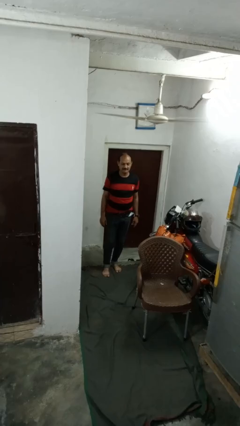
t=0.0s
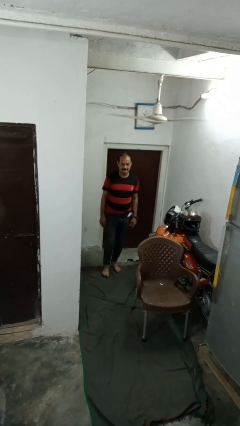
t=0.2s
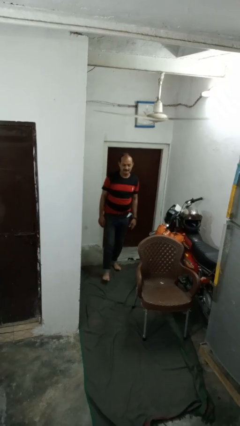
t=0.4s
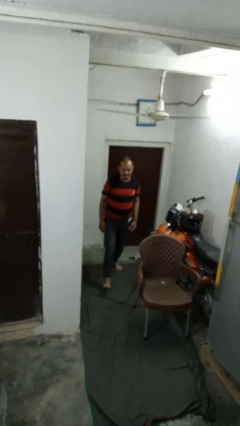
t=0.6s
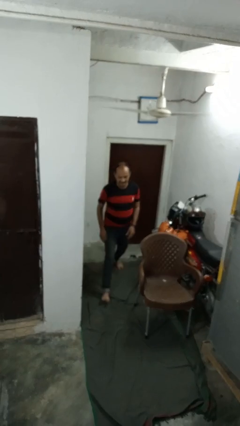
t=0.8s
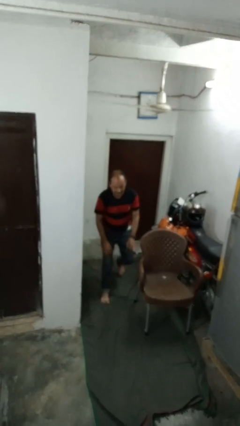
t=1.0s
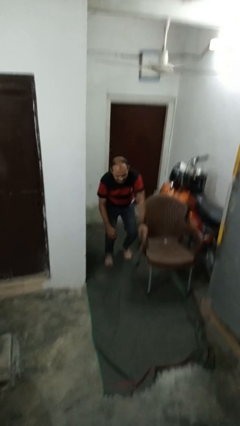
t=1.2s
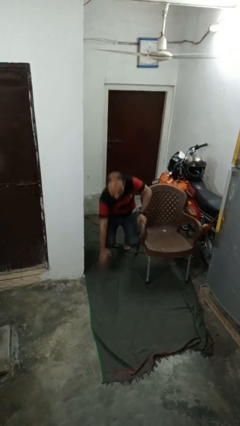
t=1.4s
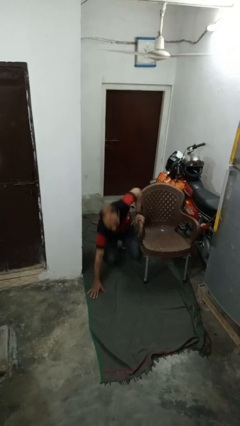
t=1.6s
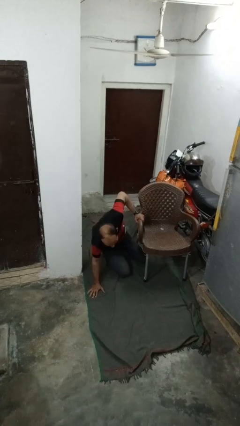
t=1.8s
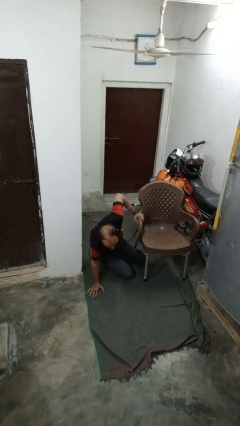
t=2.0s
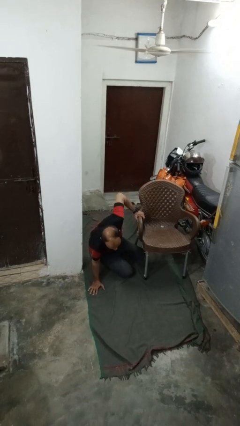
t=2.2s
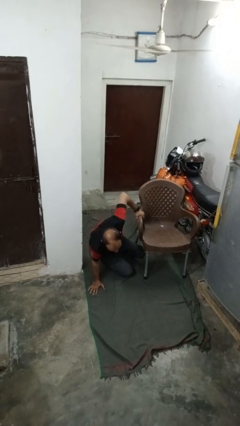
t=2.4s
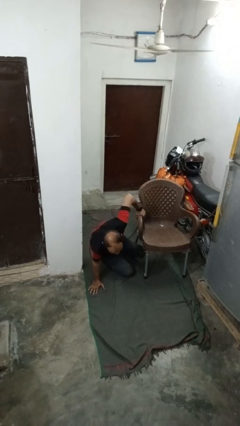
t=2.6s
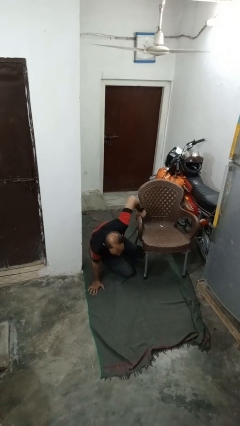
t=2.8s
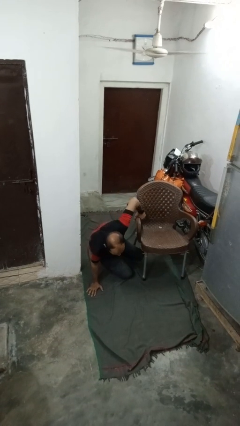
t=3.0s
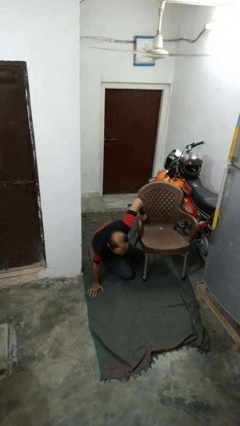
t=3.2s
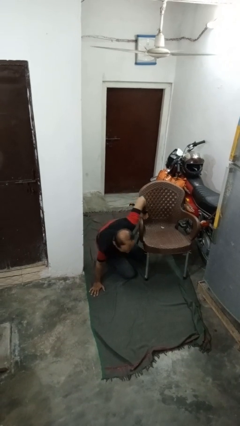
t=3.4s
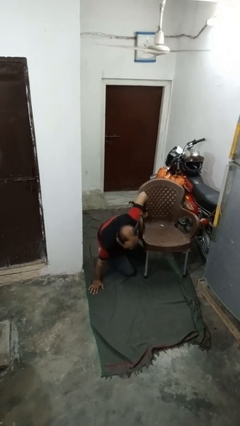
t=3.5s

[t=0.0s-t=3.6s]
person trips on object on floor

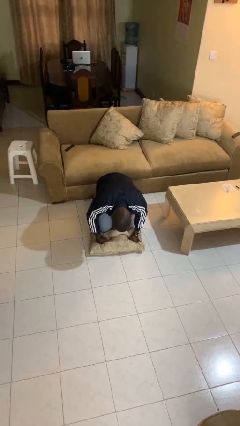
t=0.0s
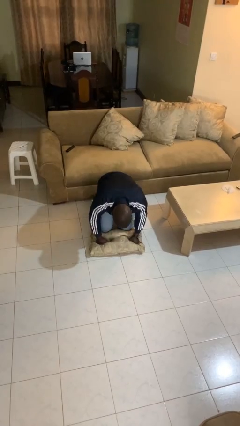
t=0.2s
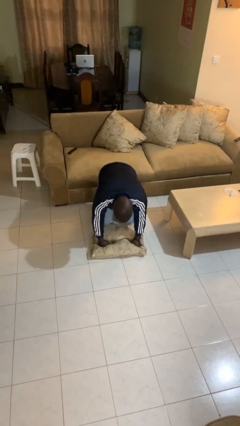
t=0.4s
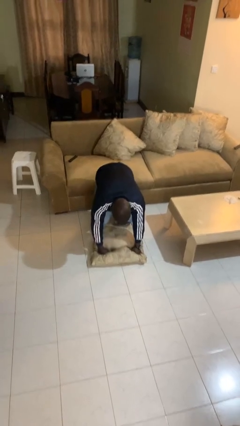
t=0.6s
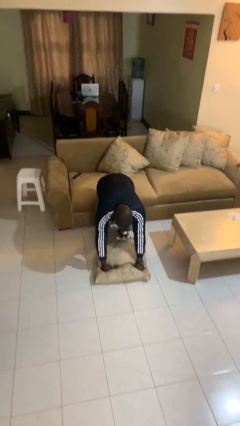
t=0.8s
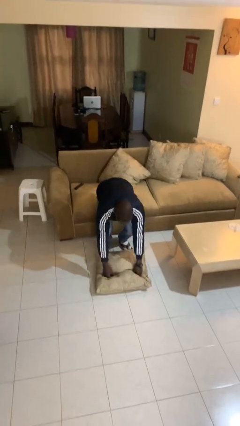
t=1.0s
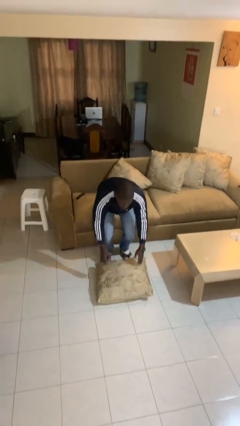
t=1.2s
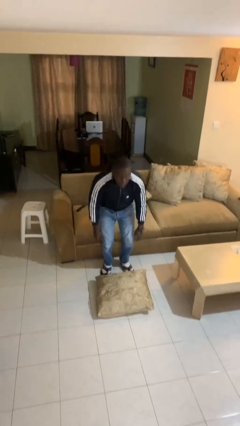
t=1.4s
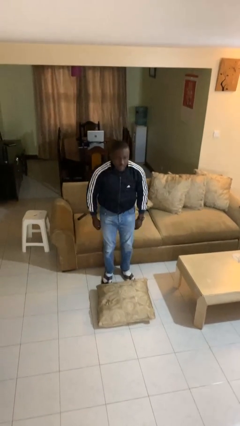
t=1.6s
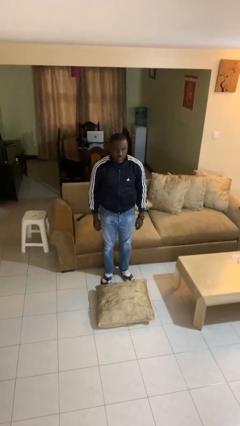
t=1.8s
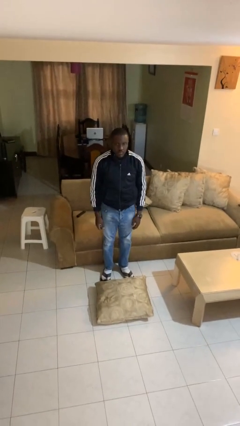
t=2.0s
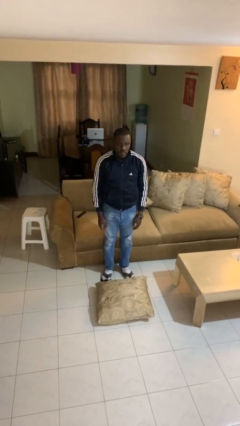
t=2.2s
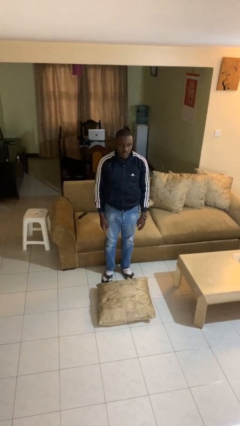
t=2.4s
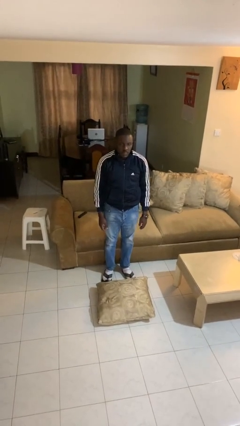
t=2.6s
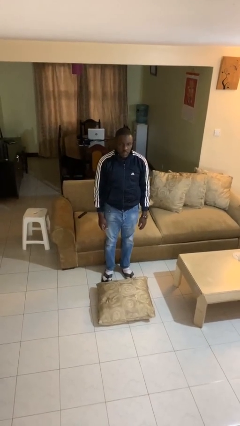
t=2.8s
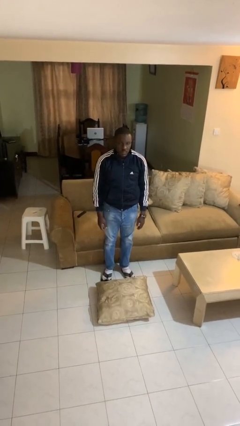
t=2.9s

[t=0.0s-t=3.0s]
person stands up from floor

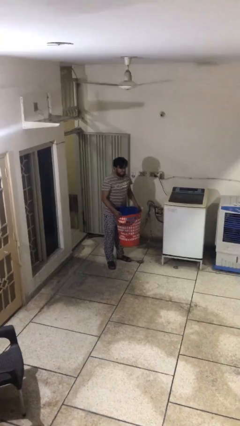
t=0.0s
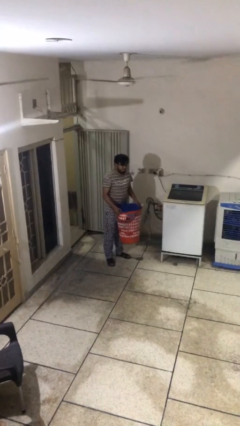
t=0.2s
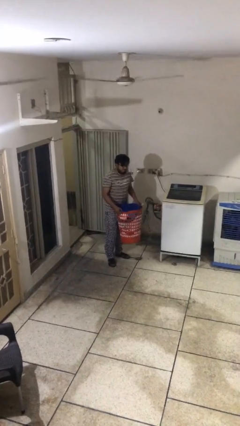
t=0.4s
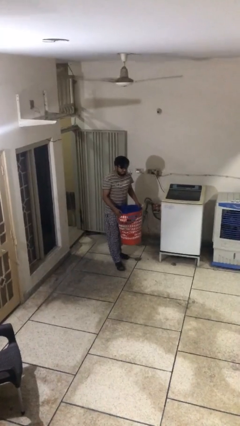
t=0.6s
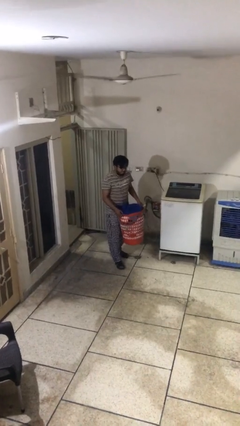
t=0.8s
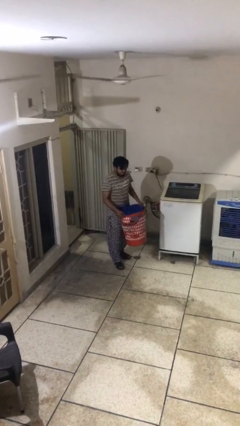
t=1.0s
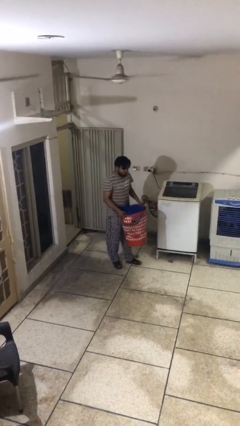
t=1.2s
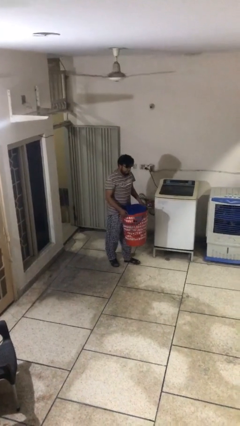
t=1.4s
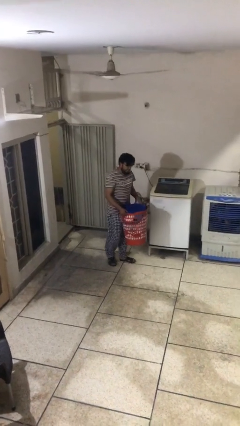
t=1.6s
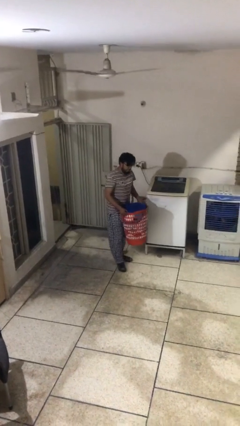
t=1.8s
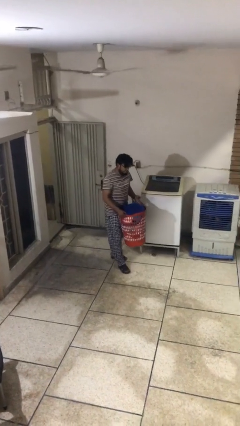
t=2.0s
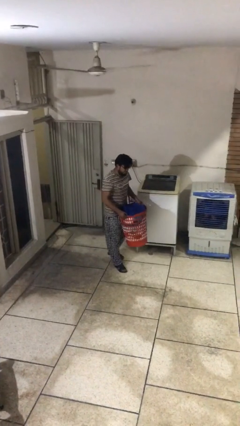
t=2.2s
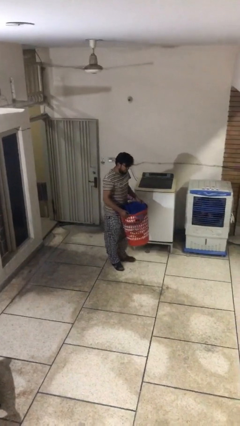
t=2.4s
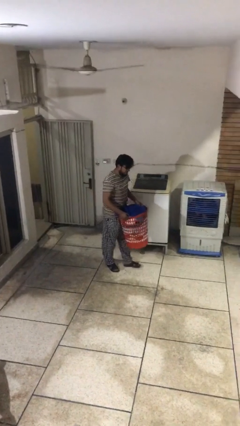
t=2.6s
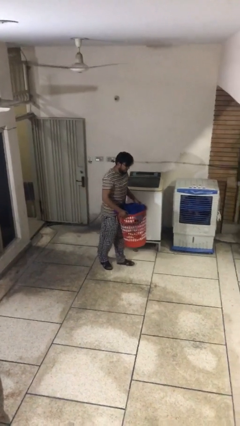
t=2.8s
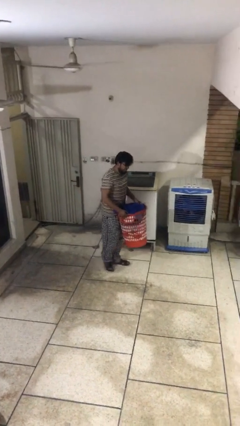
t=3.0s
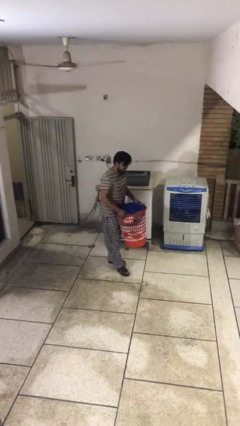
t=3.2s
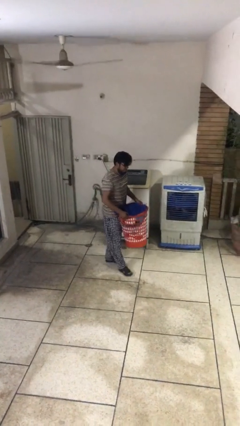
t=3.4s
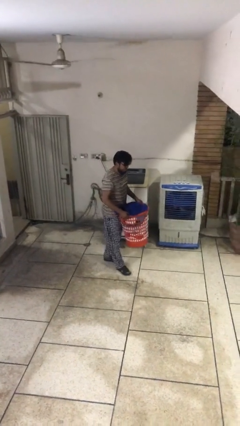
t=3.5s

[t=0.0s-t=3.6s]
person carries heavy object

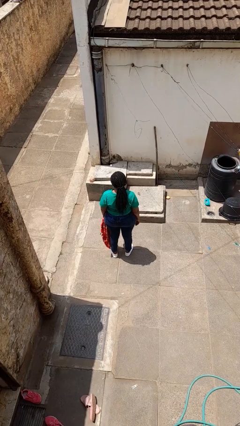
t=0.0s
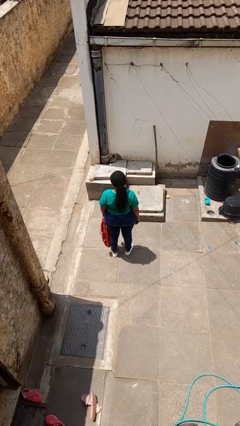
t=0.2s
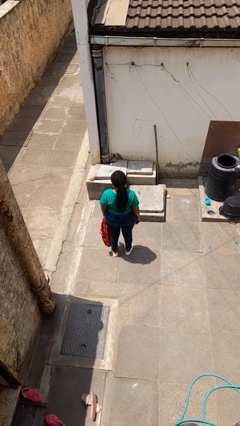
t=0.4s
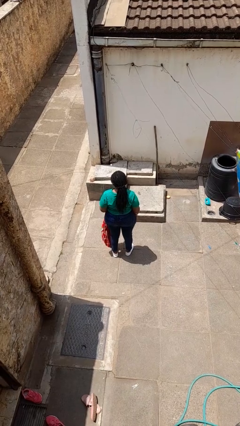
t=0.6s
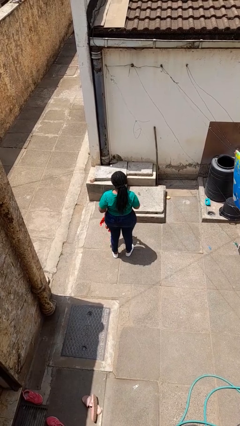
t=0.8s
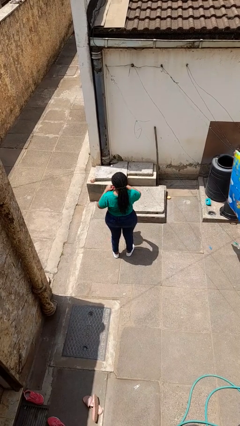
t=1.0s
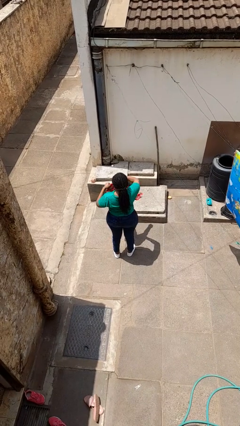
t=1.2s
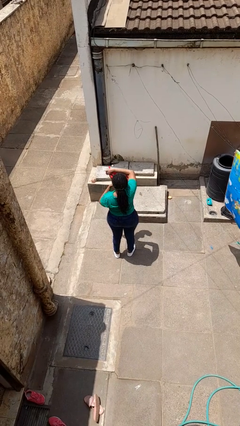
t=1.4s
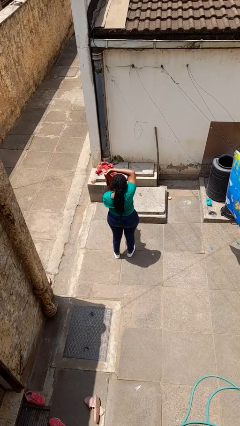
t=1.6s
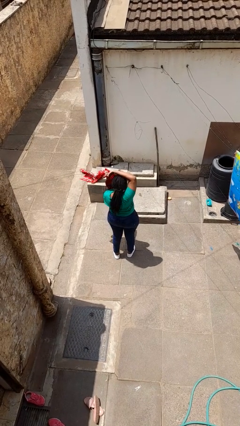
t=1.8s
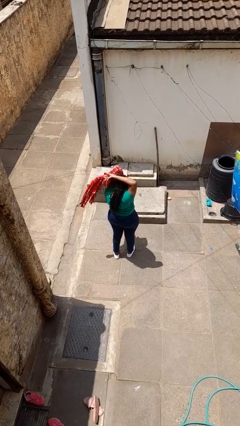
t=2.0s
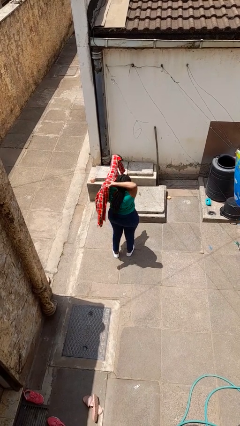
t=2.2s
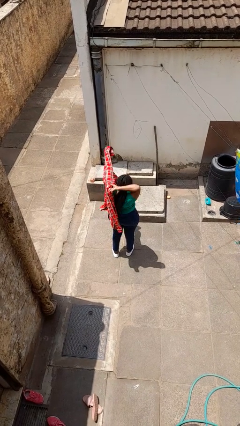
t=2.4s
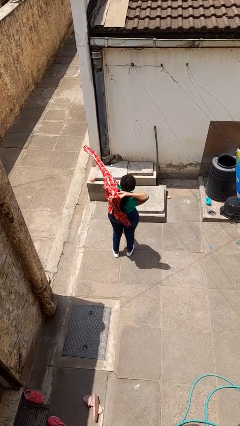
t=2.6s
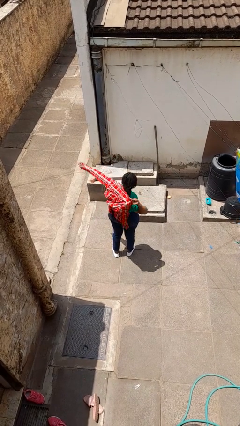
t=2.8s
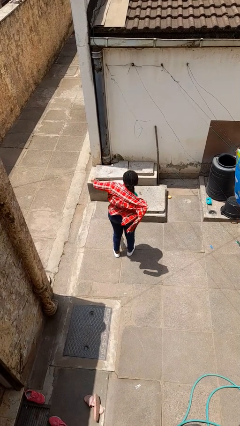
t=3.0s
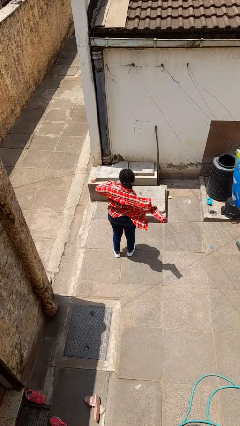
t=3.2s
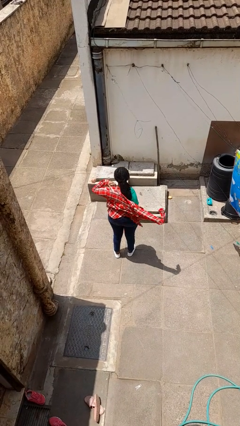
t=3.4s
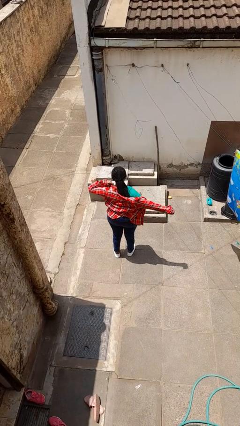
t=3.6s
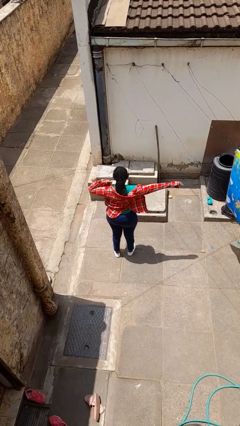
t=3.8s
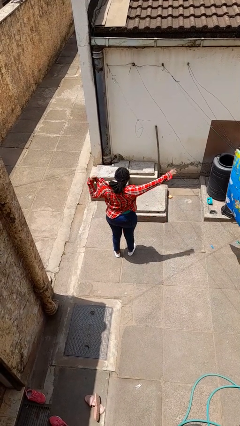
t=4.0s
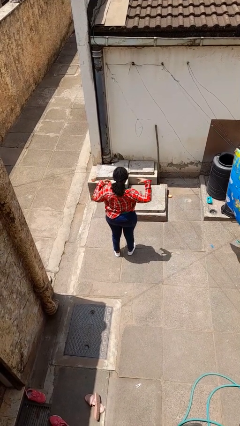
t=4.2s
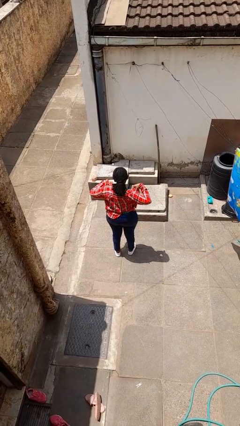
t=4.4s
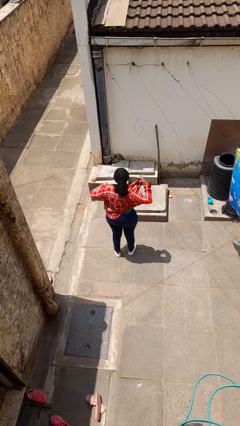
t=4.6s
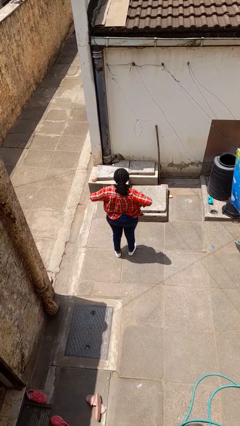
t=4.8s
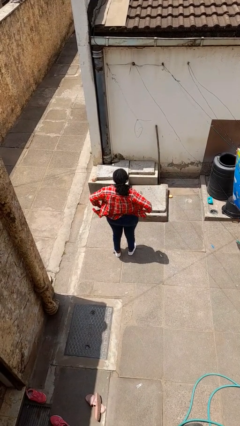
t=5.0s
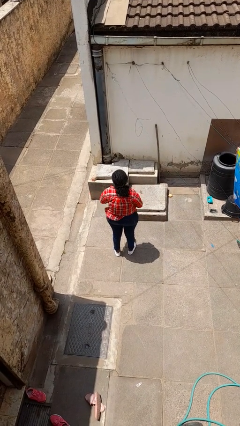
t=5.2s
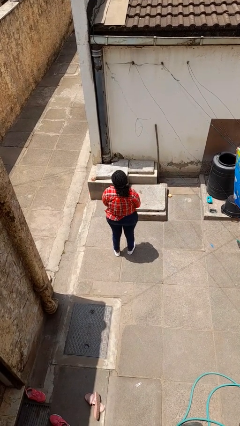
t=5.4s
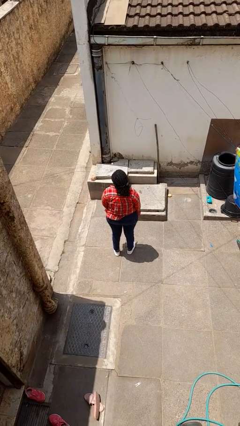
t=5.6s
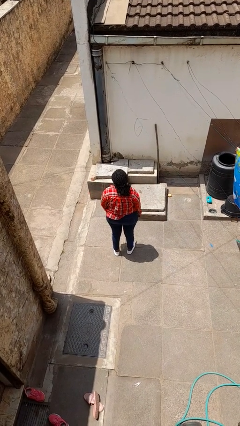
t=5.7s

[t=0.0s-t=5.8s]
person puts on shirt

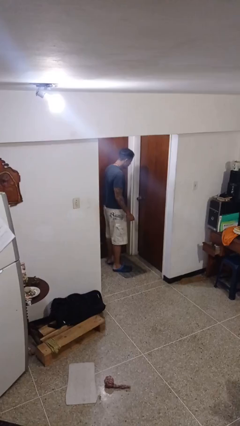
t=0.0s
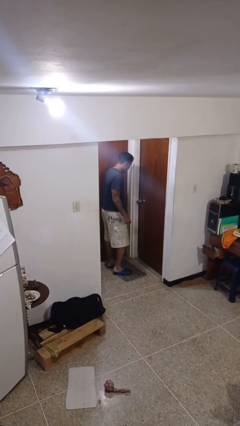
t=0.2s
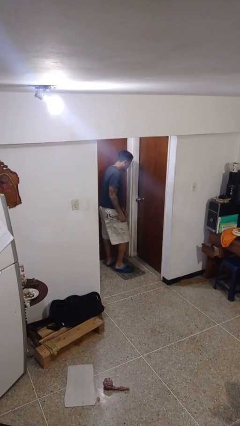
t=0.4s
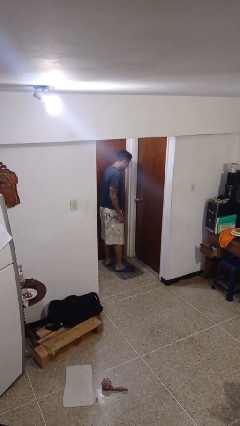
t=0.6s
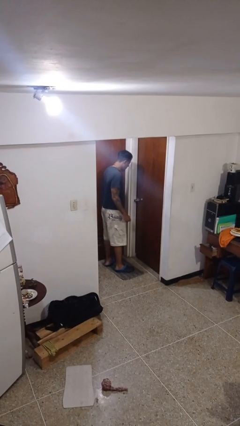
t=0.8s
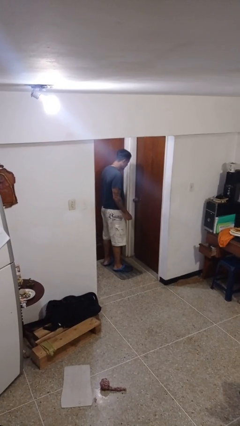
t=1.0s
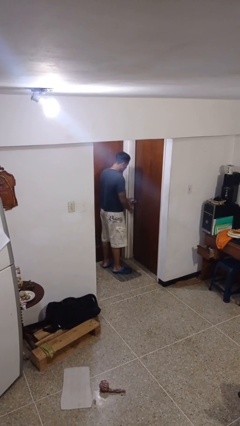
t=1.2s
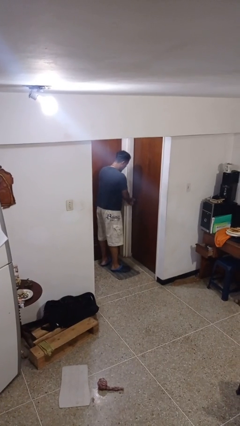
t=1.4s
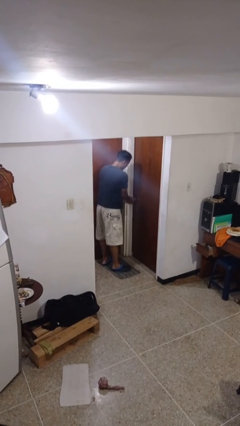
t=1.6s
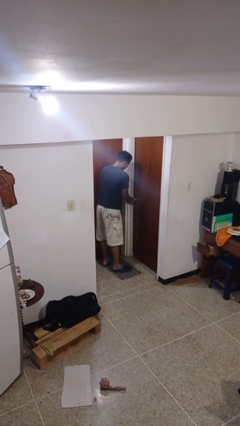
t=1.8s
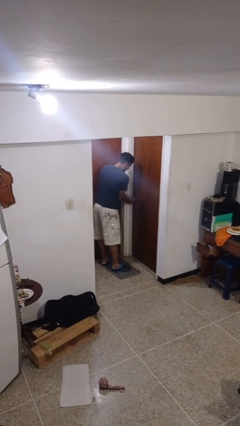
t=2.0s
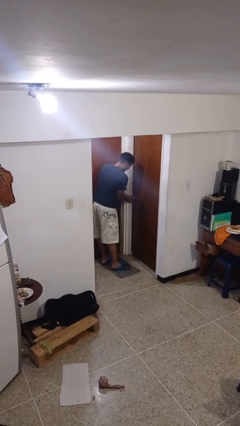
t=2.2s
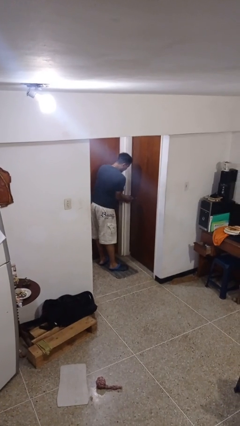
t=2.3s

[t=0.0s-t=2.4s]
person unlocks door with keys
